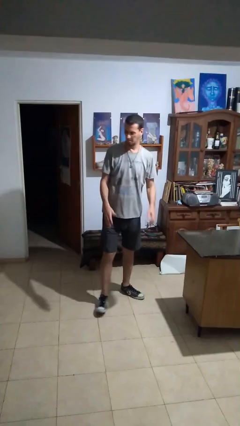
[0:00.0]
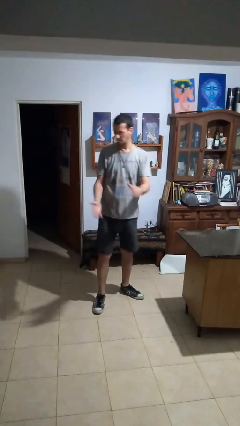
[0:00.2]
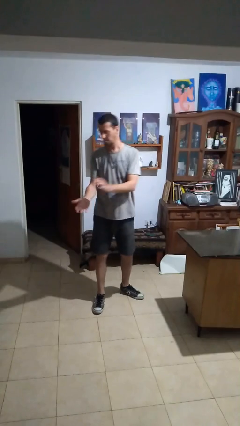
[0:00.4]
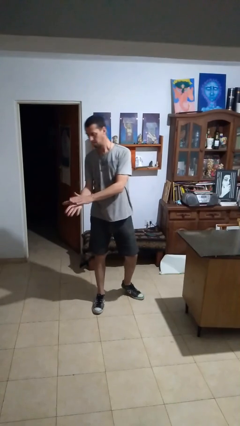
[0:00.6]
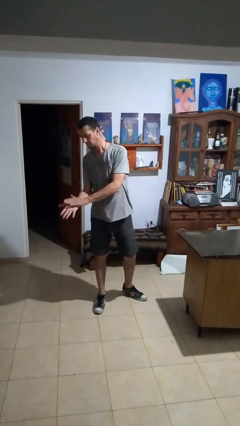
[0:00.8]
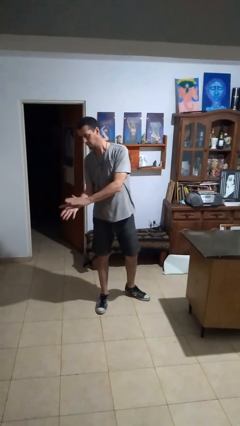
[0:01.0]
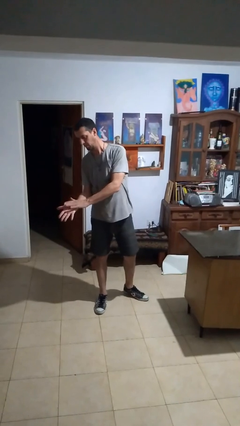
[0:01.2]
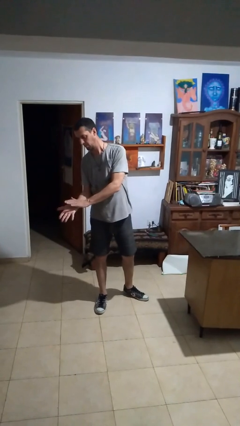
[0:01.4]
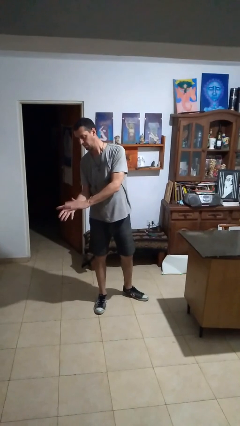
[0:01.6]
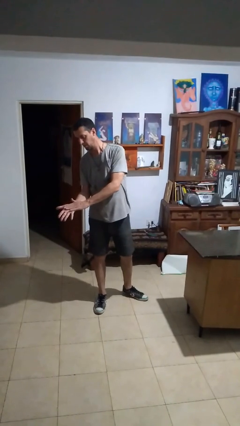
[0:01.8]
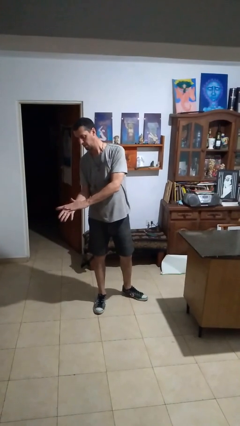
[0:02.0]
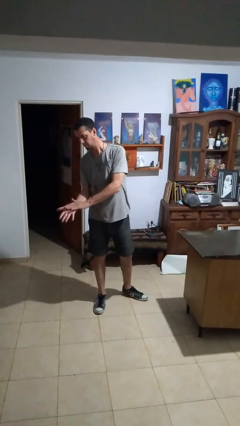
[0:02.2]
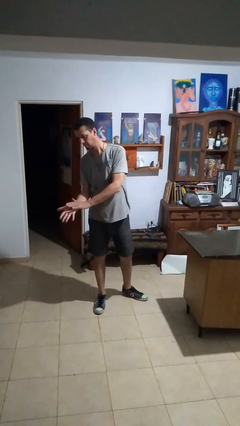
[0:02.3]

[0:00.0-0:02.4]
person claps hands

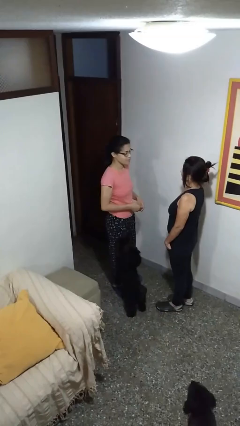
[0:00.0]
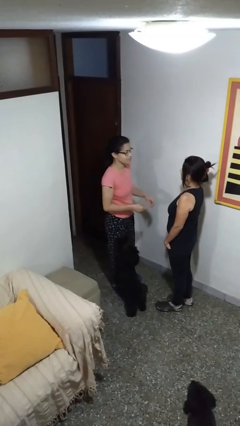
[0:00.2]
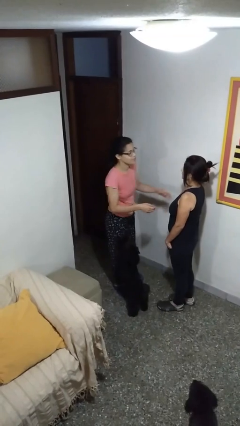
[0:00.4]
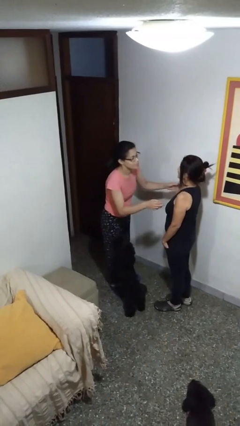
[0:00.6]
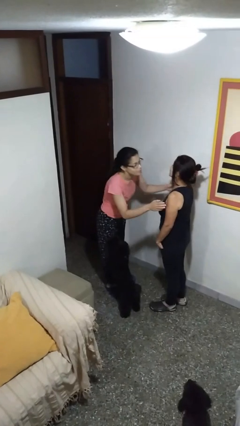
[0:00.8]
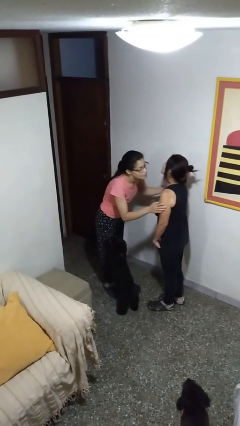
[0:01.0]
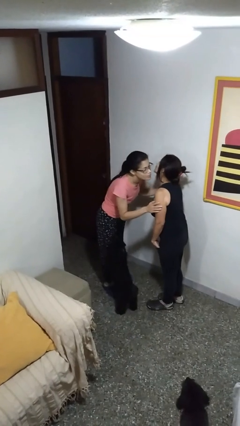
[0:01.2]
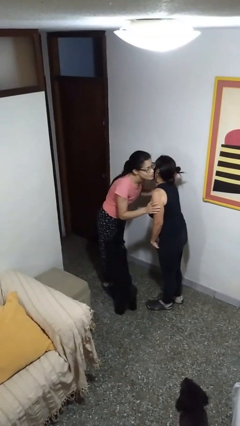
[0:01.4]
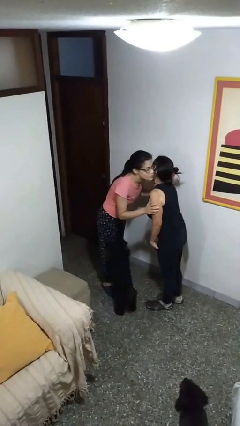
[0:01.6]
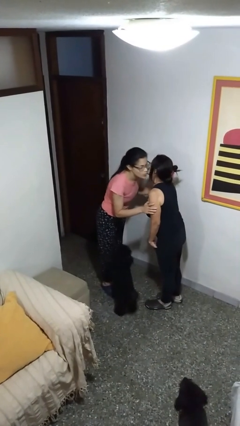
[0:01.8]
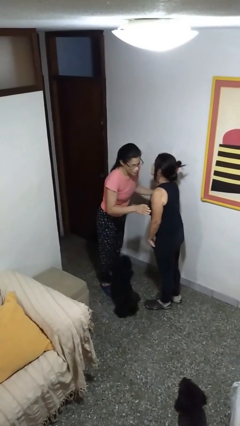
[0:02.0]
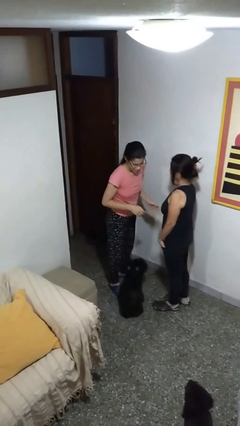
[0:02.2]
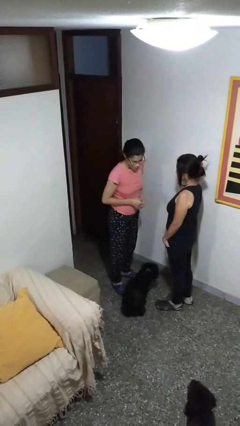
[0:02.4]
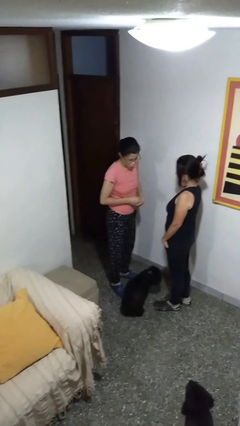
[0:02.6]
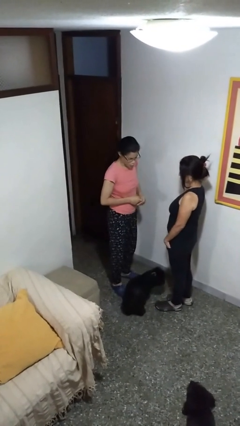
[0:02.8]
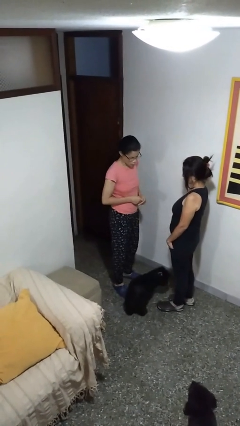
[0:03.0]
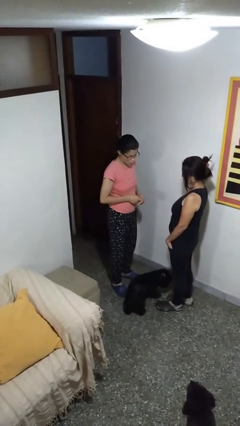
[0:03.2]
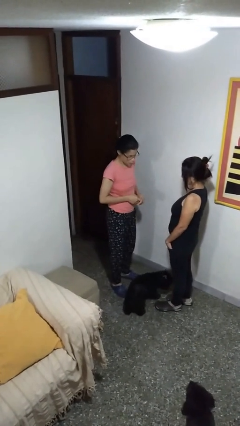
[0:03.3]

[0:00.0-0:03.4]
person kisses cheek of person

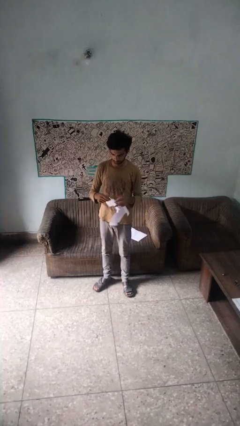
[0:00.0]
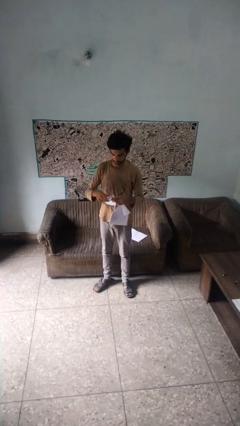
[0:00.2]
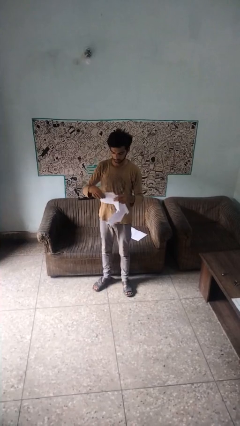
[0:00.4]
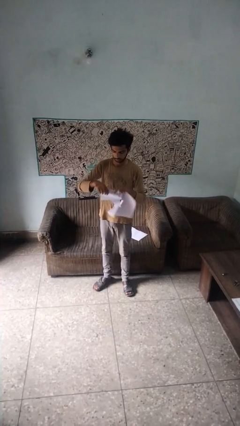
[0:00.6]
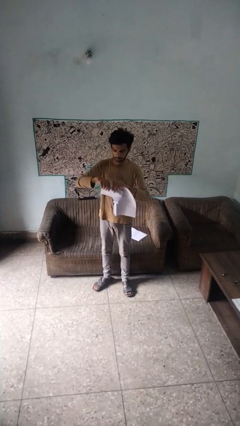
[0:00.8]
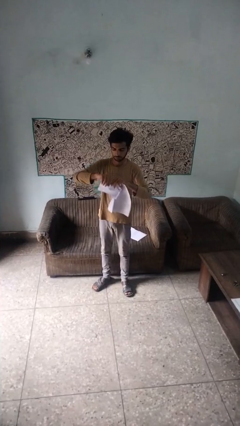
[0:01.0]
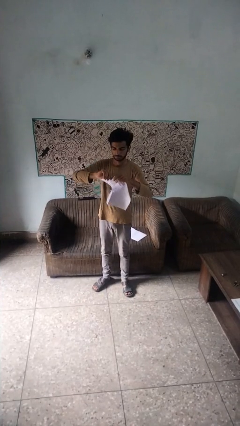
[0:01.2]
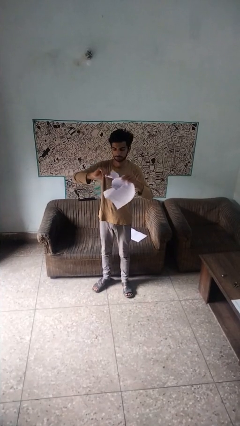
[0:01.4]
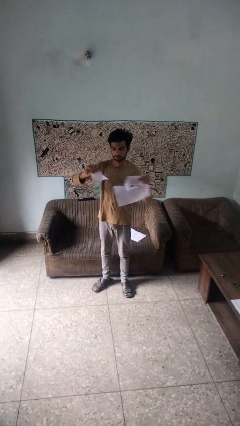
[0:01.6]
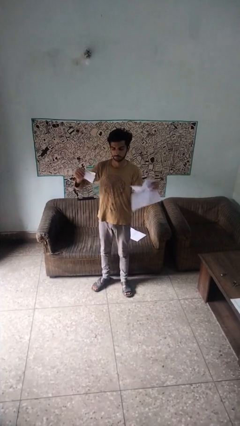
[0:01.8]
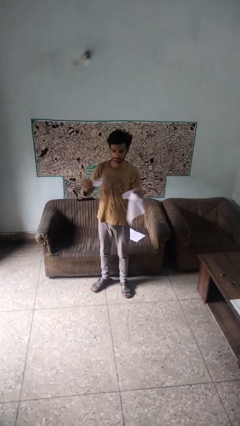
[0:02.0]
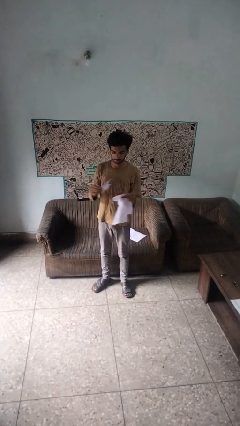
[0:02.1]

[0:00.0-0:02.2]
person tears paper

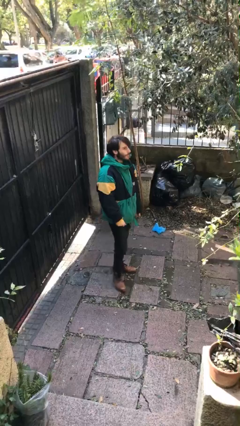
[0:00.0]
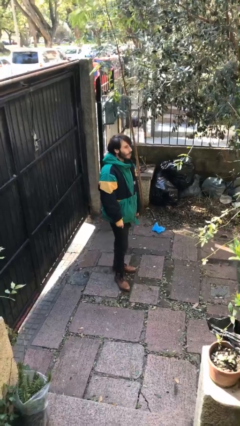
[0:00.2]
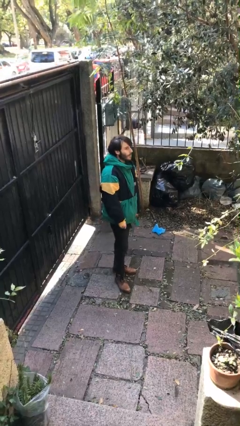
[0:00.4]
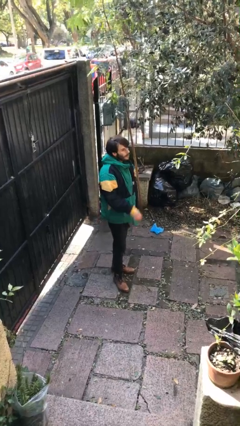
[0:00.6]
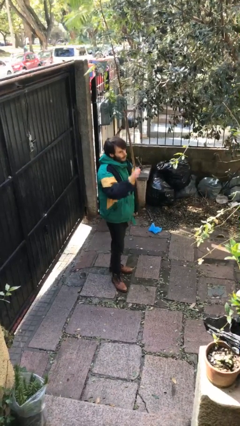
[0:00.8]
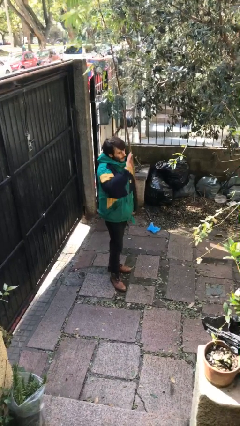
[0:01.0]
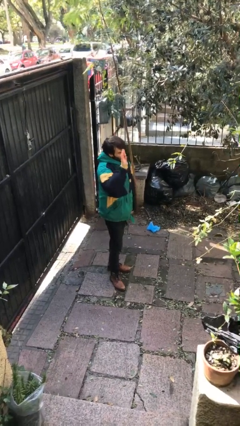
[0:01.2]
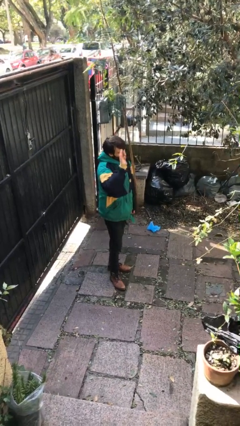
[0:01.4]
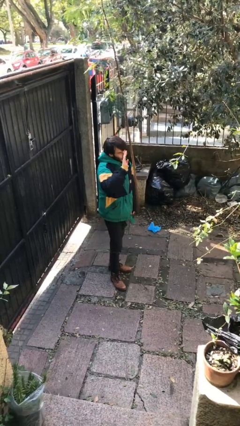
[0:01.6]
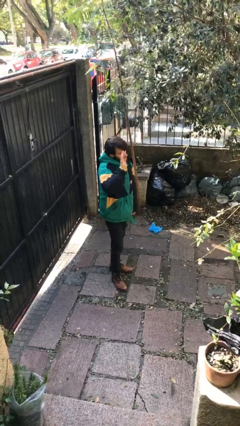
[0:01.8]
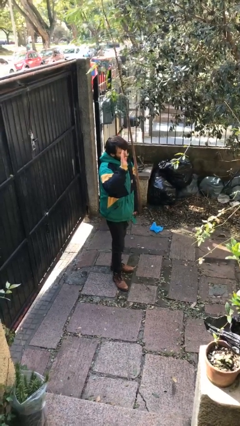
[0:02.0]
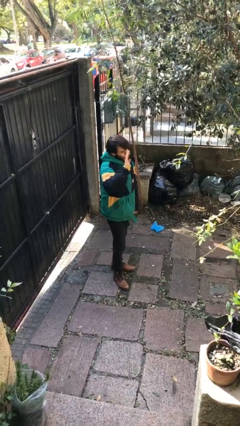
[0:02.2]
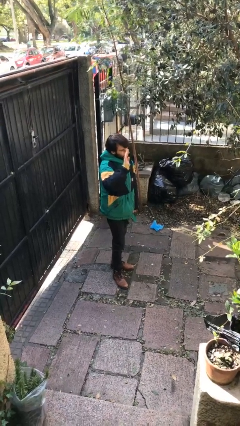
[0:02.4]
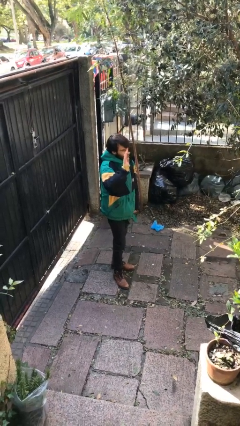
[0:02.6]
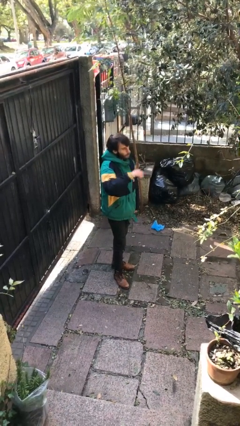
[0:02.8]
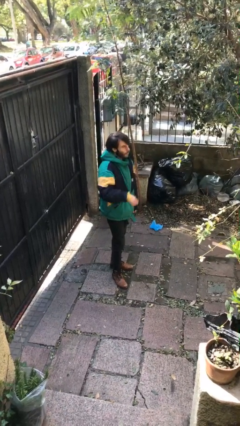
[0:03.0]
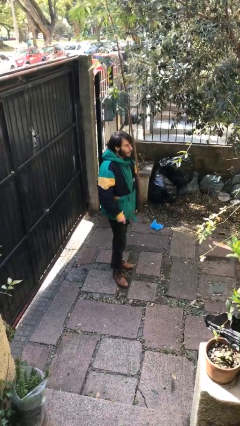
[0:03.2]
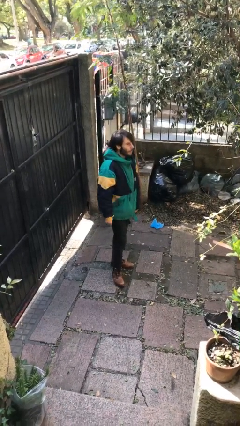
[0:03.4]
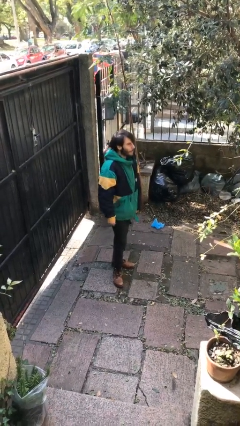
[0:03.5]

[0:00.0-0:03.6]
person waves at person

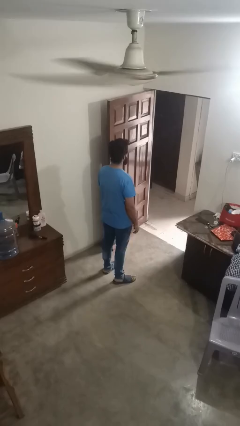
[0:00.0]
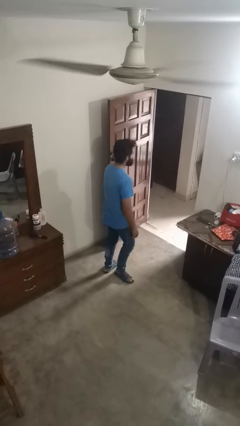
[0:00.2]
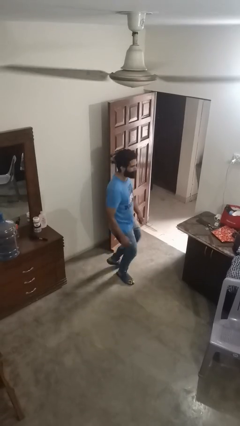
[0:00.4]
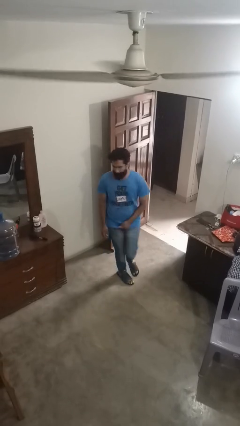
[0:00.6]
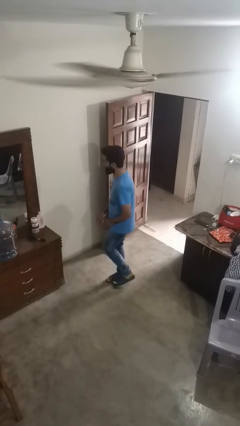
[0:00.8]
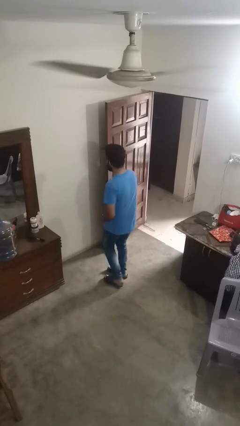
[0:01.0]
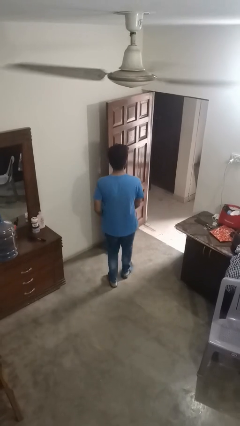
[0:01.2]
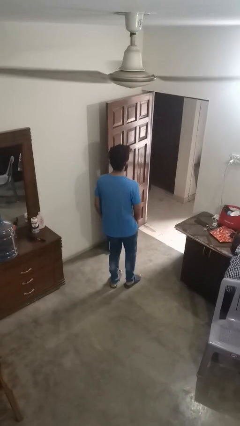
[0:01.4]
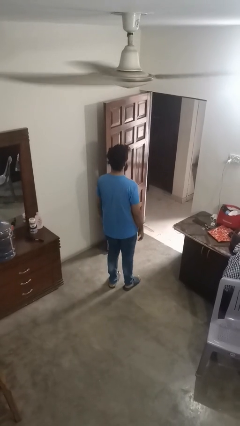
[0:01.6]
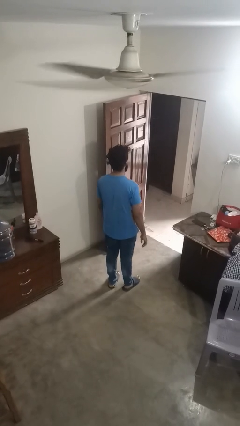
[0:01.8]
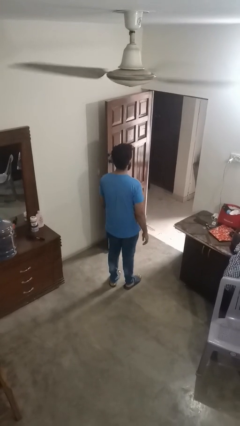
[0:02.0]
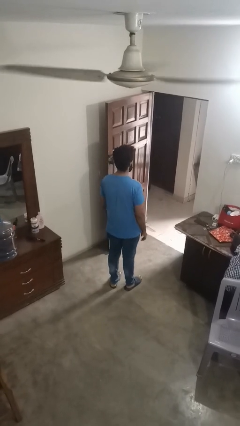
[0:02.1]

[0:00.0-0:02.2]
person twirls

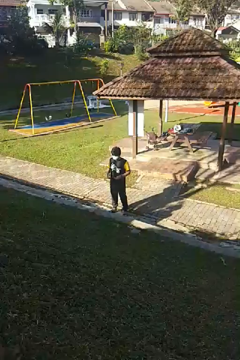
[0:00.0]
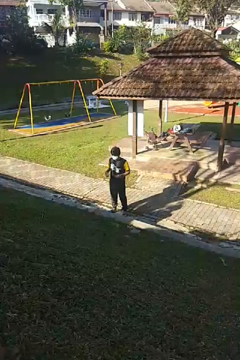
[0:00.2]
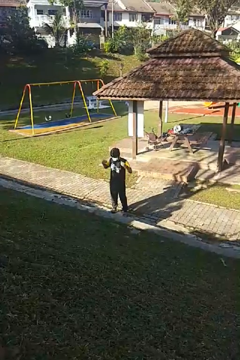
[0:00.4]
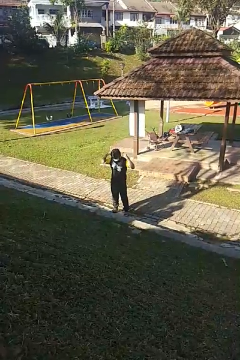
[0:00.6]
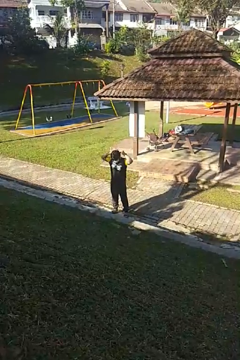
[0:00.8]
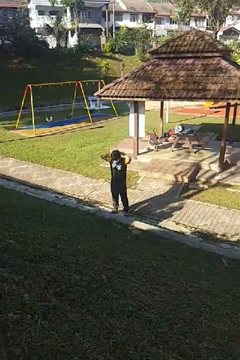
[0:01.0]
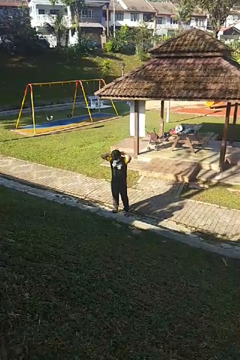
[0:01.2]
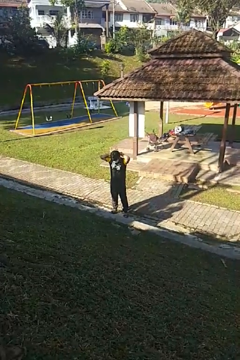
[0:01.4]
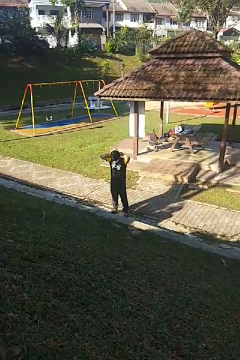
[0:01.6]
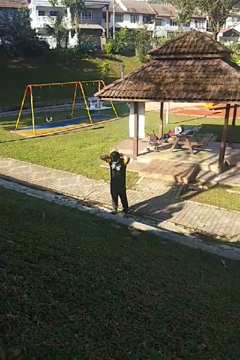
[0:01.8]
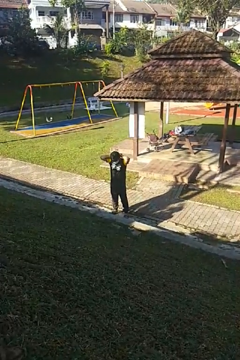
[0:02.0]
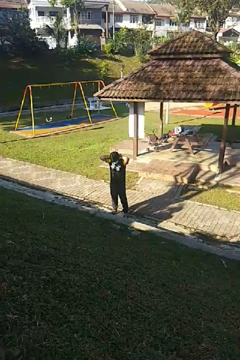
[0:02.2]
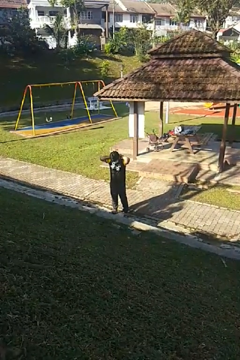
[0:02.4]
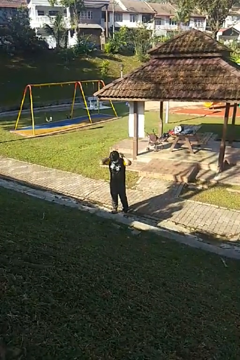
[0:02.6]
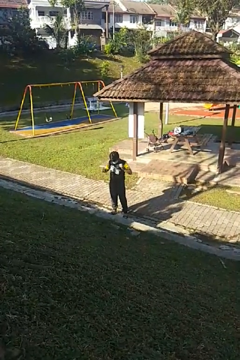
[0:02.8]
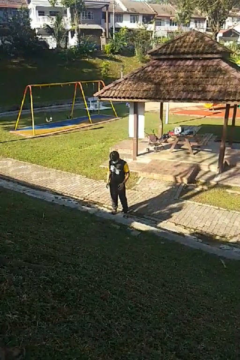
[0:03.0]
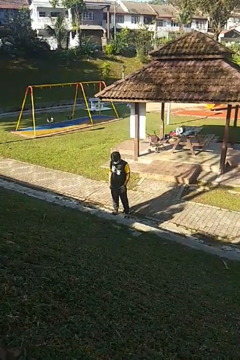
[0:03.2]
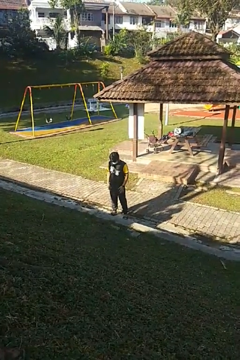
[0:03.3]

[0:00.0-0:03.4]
person puts on necklace

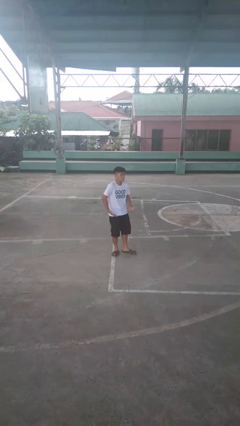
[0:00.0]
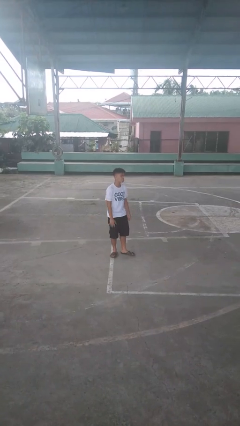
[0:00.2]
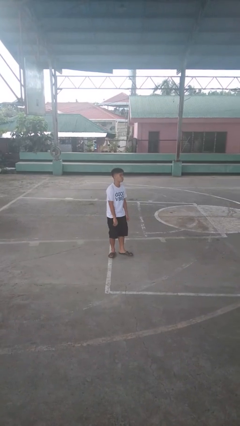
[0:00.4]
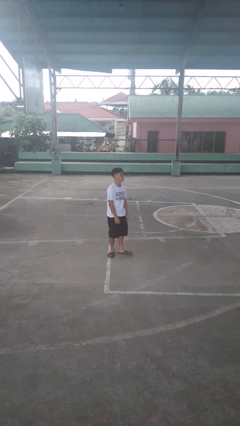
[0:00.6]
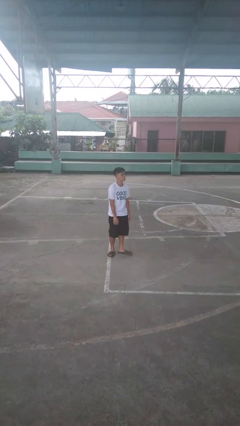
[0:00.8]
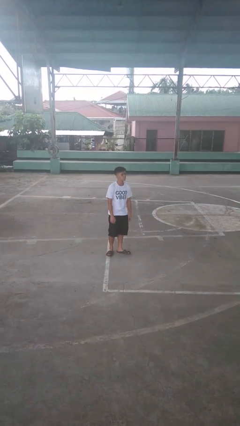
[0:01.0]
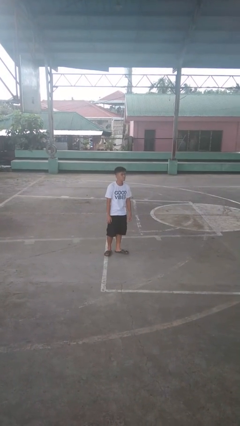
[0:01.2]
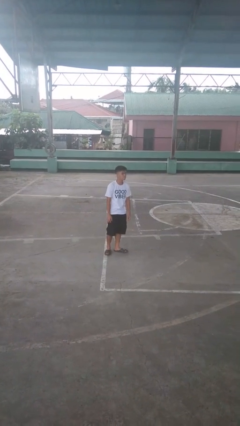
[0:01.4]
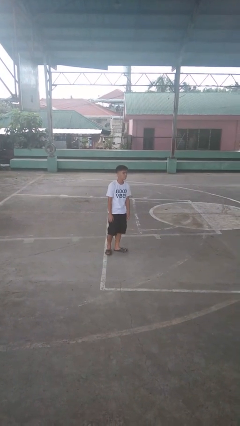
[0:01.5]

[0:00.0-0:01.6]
person shrugs
